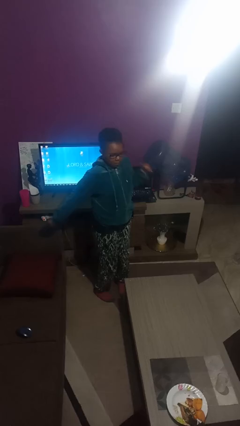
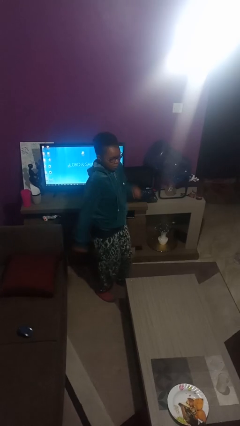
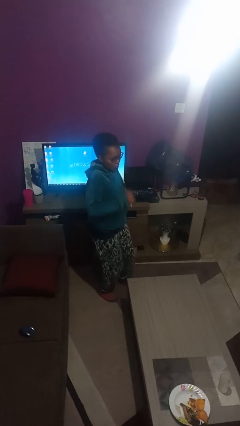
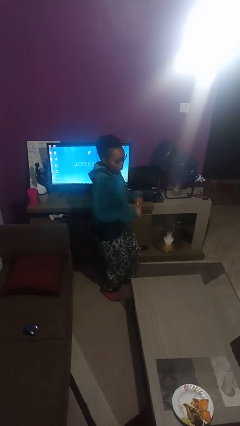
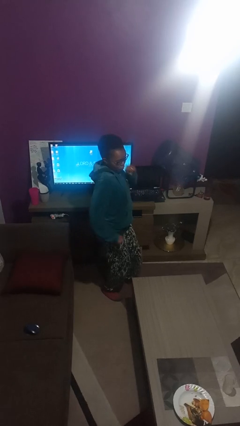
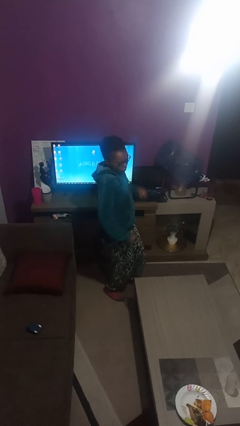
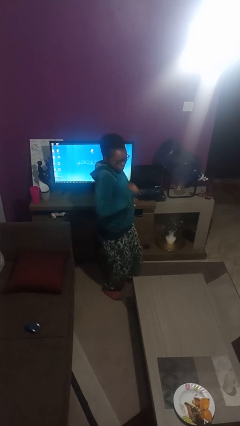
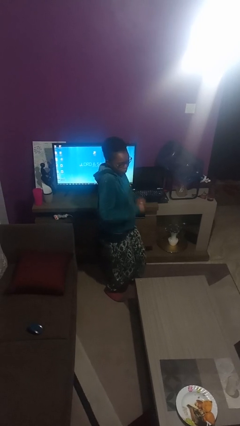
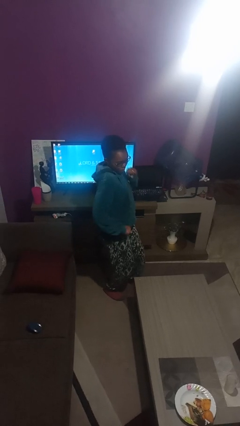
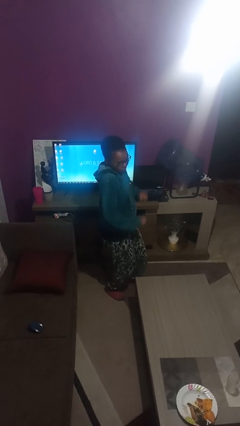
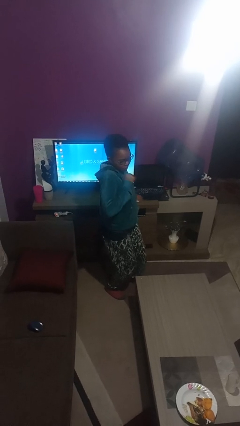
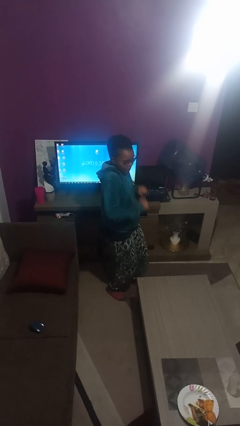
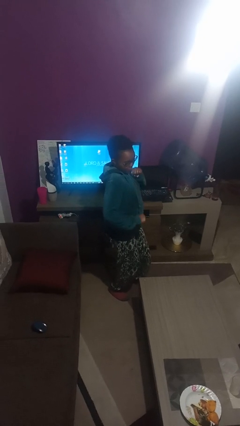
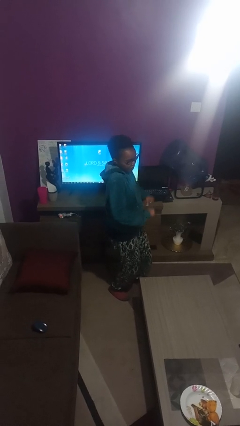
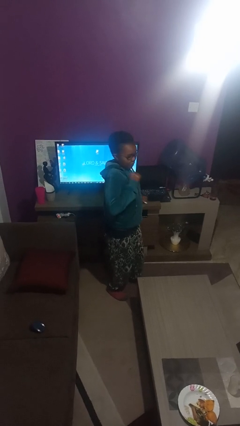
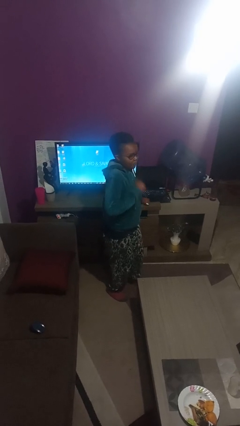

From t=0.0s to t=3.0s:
person dances in place

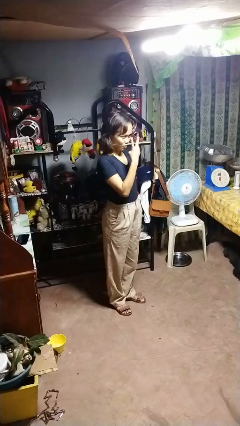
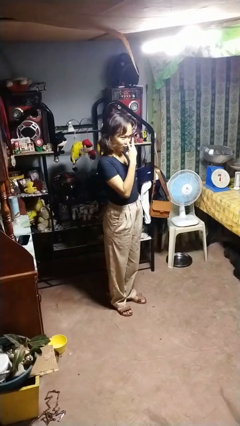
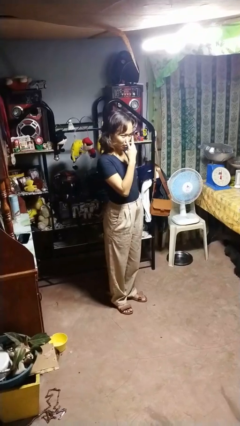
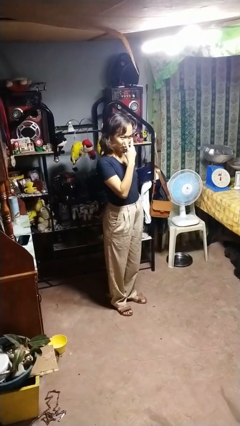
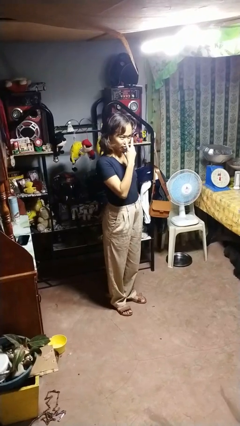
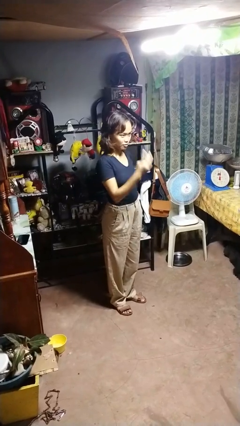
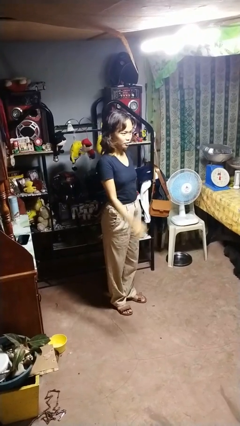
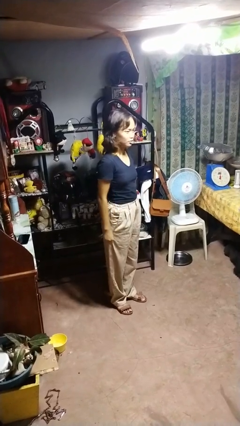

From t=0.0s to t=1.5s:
person gestures watch closely

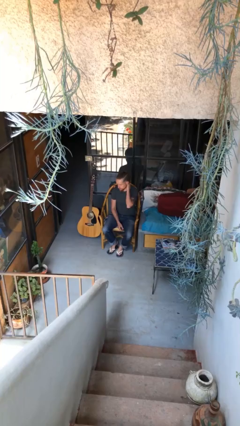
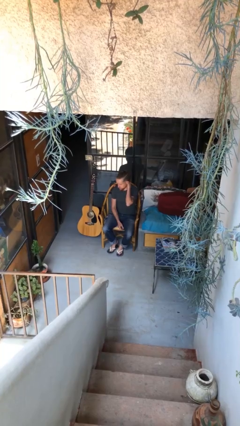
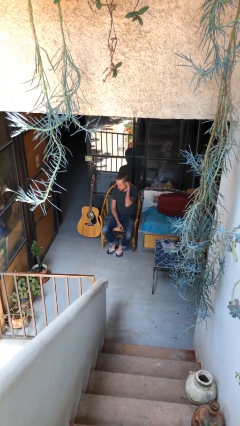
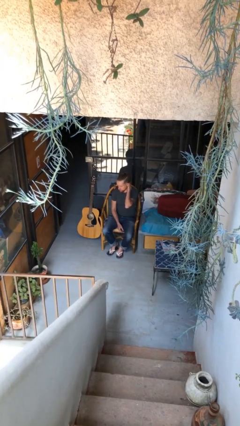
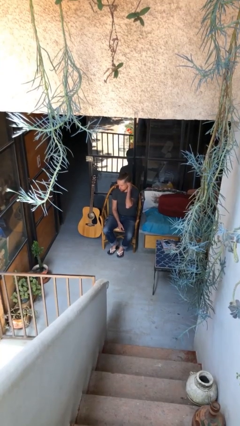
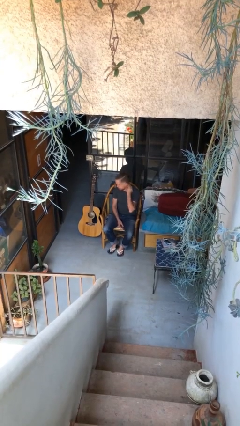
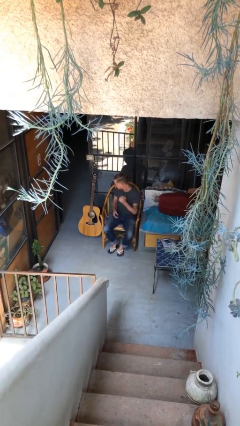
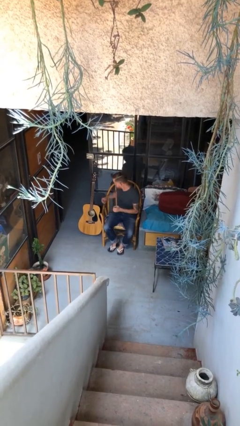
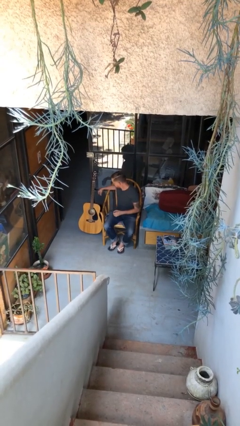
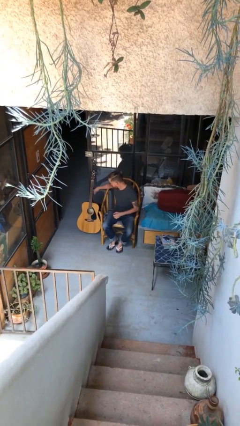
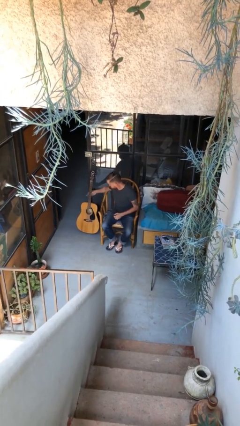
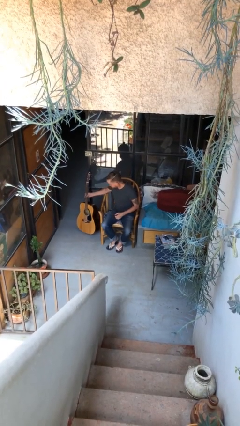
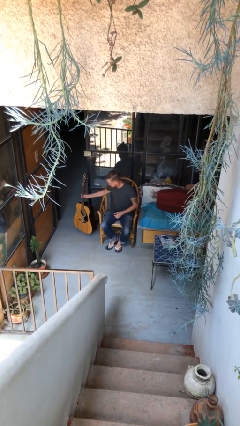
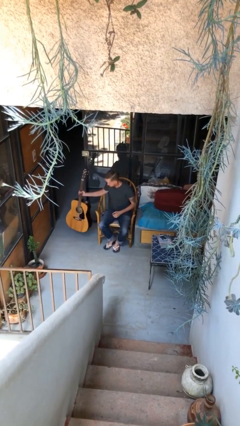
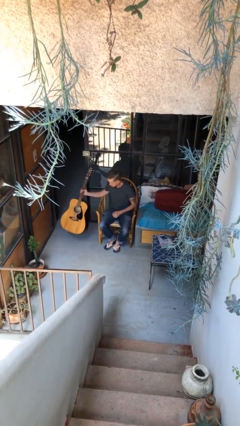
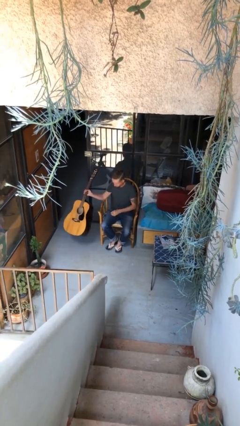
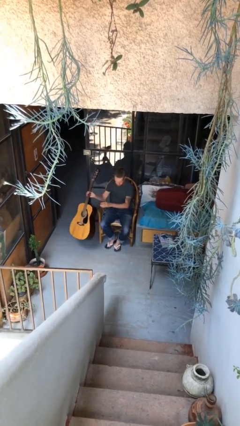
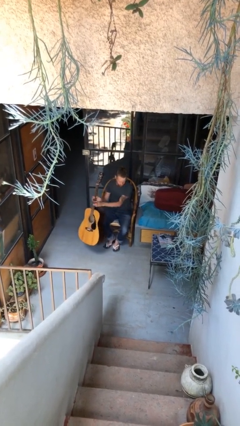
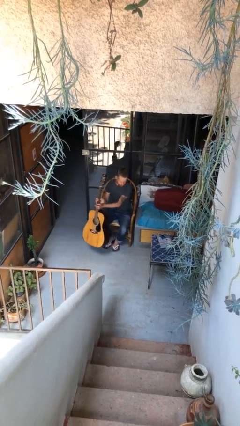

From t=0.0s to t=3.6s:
person picks up object from floor

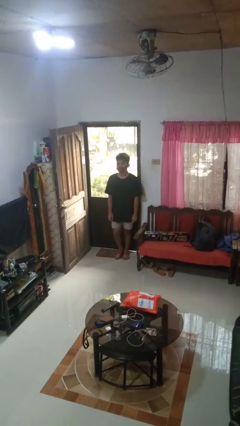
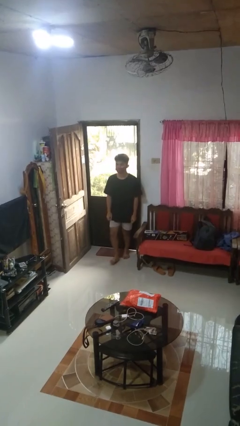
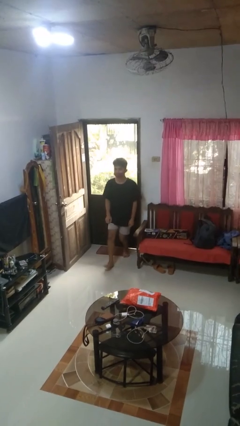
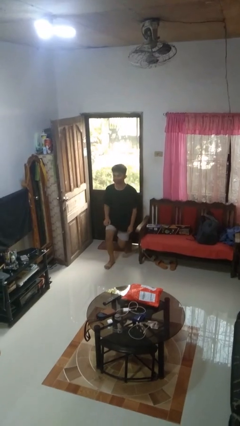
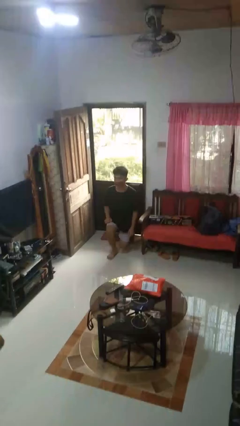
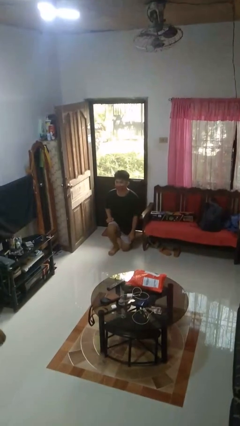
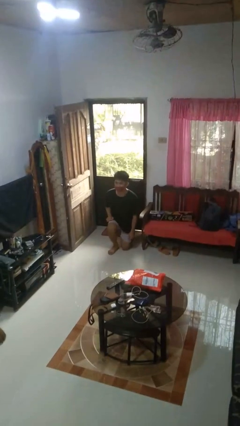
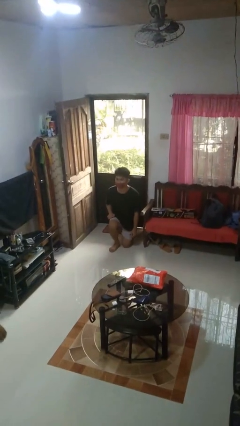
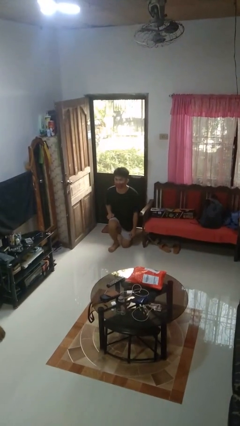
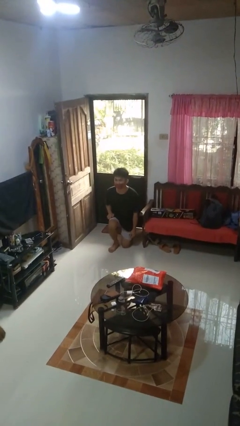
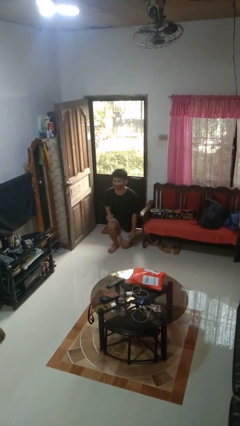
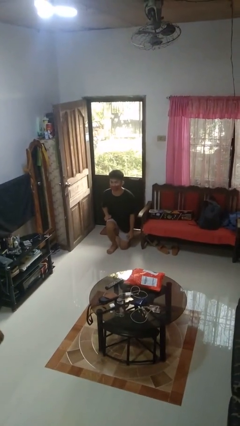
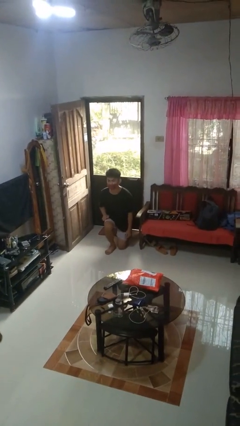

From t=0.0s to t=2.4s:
person kneels

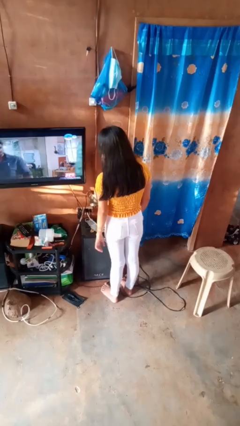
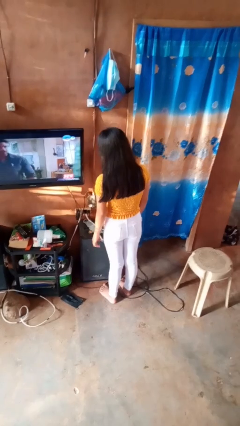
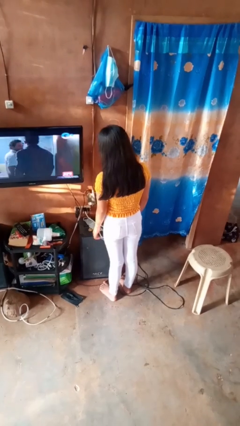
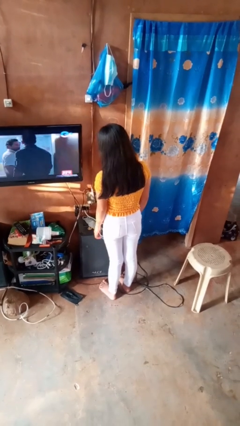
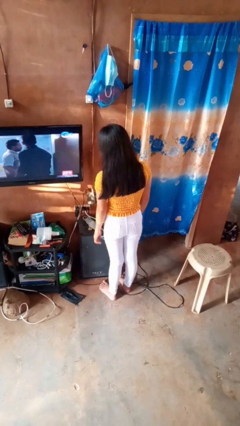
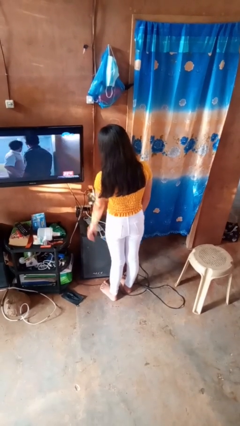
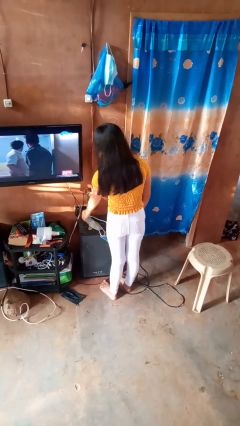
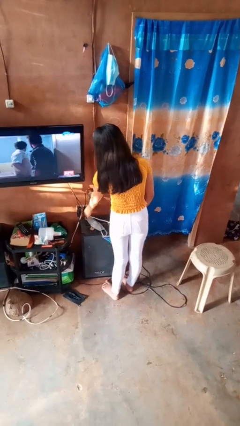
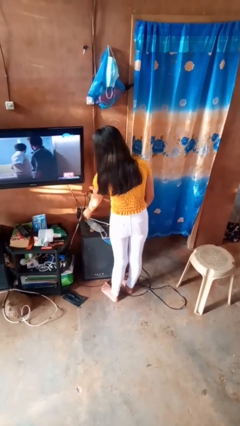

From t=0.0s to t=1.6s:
person unplugs from electrical socket

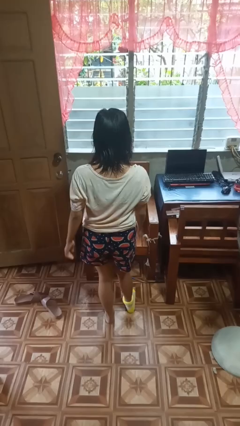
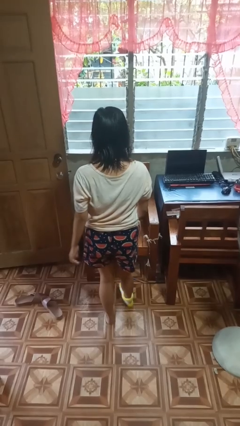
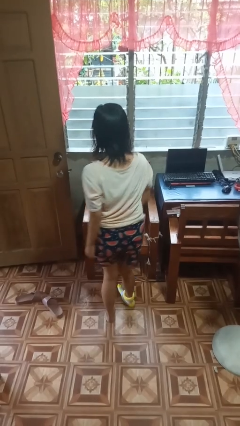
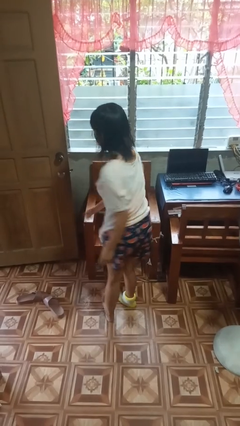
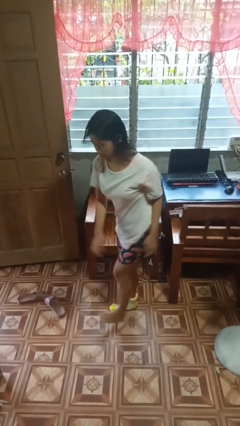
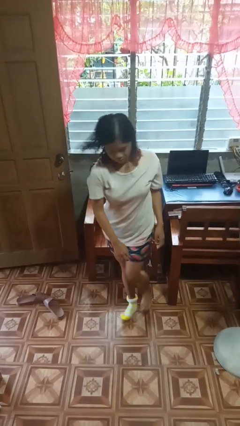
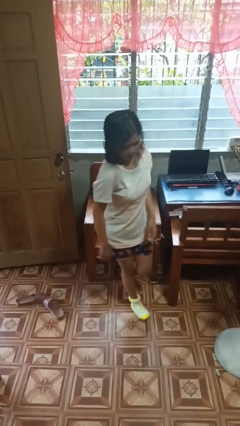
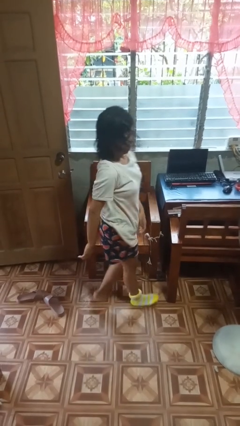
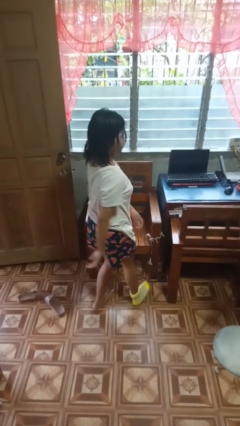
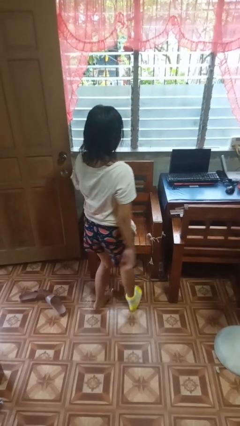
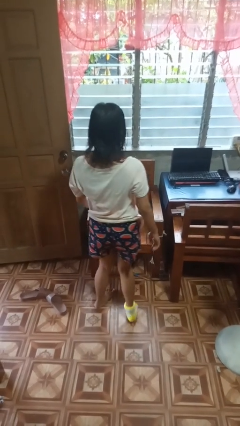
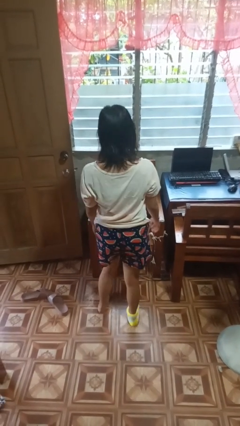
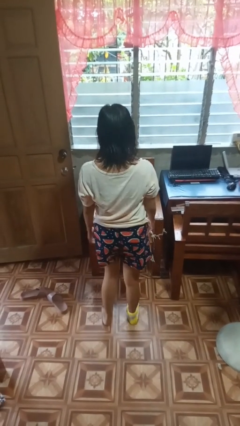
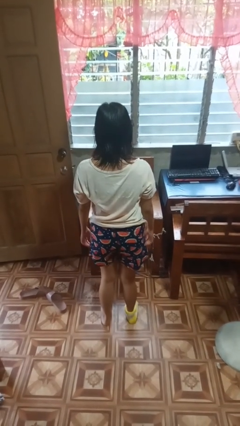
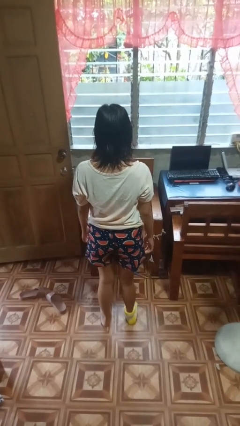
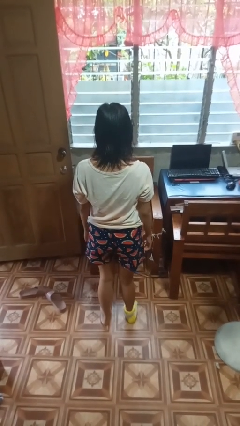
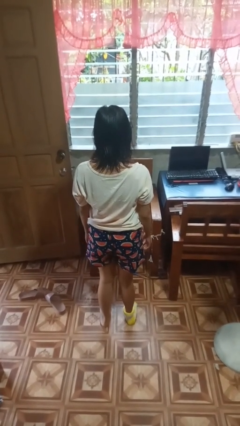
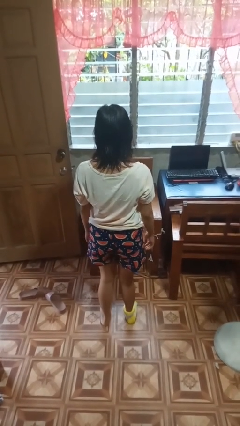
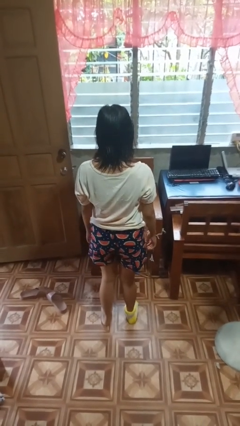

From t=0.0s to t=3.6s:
person twirls

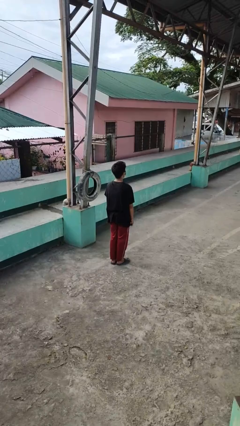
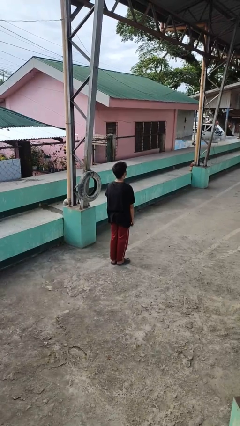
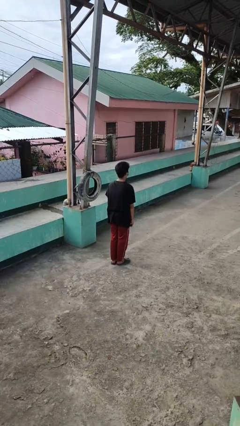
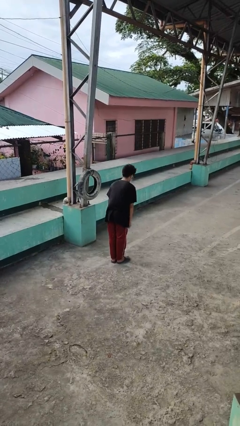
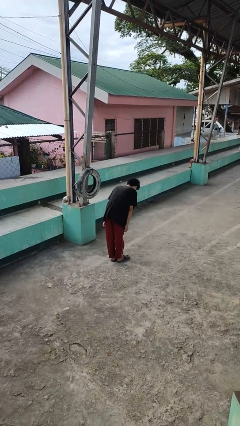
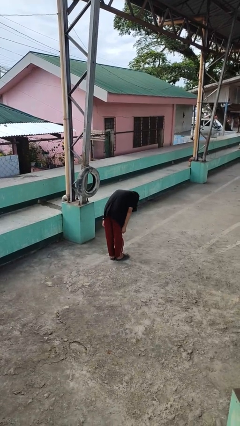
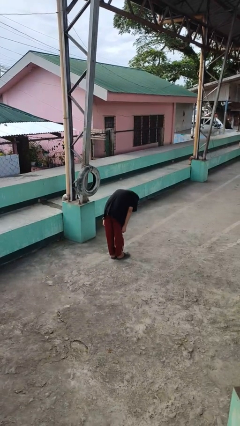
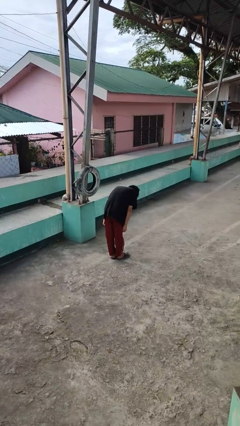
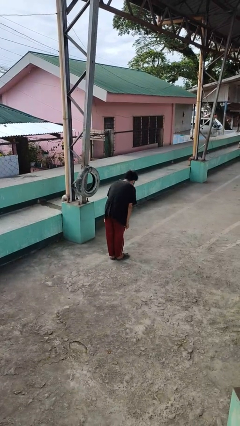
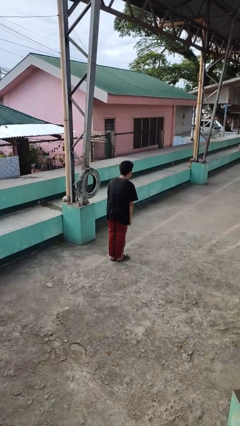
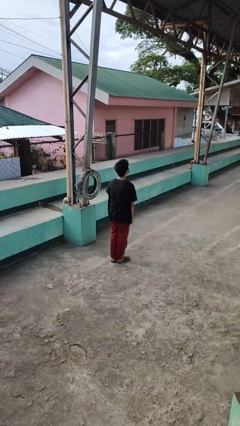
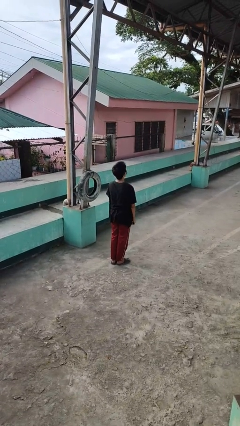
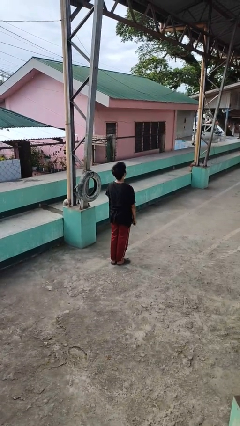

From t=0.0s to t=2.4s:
person bows
